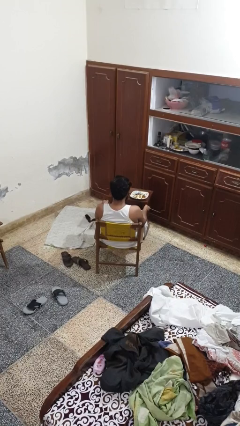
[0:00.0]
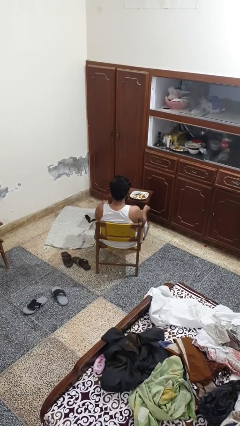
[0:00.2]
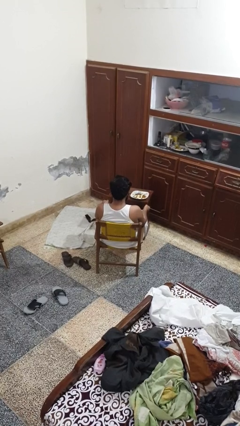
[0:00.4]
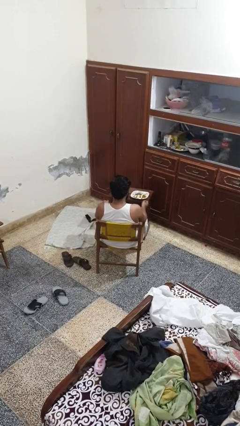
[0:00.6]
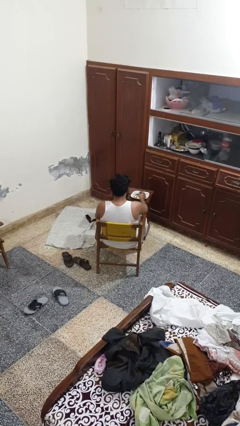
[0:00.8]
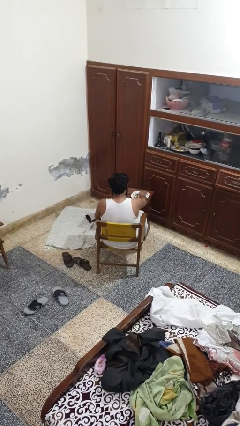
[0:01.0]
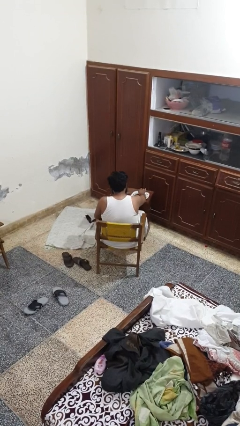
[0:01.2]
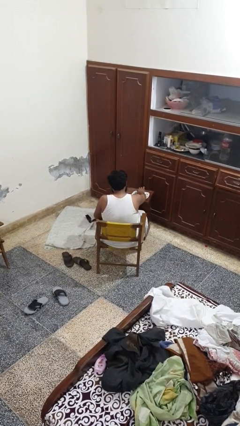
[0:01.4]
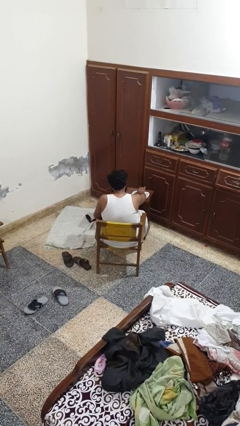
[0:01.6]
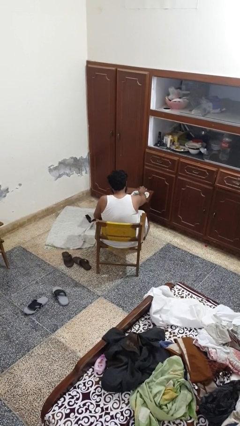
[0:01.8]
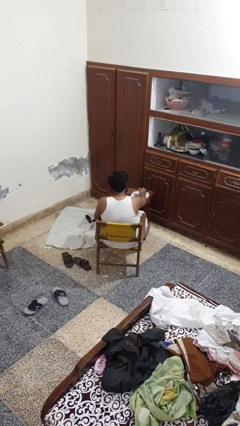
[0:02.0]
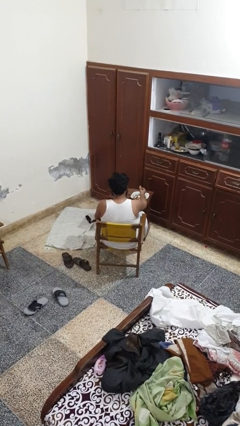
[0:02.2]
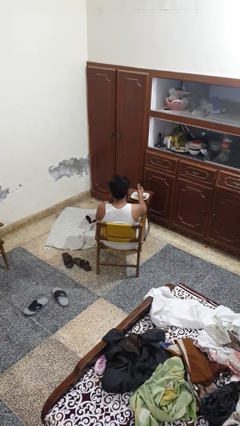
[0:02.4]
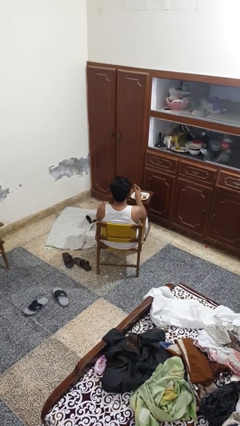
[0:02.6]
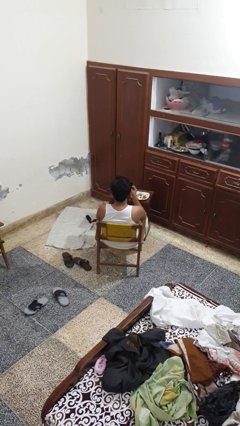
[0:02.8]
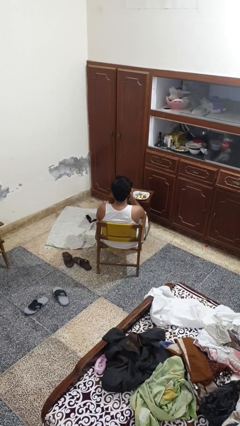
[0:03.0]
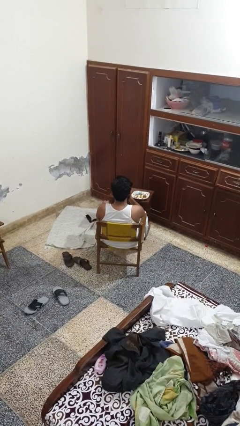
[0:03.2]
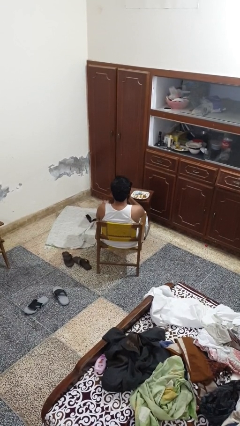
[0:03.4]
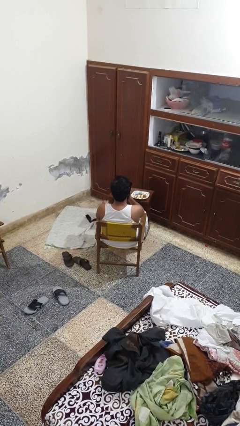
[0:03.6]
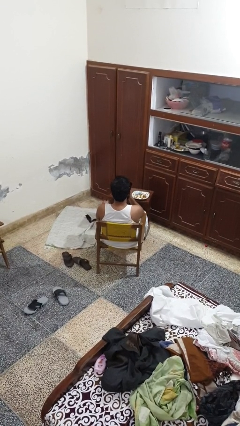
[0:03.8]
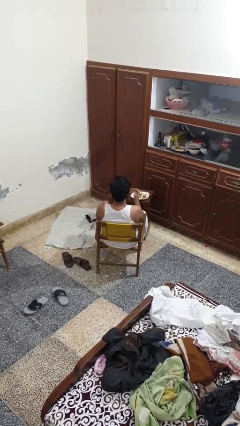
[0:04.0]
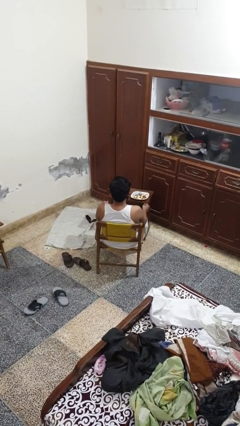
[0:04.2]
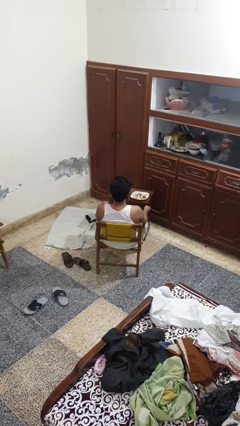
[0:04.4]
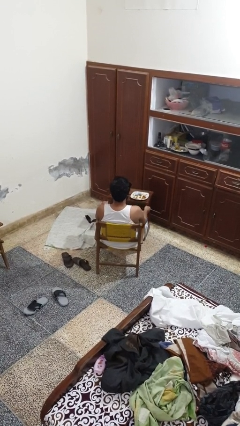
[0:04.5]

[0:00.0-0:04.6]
person eats with hands

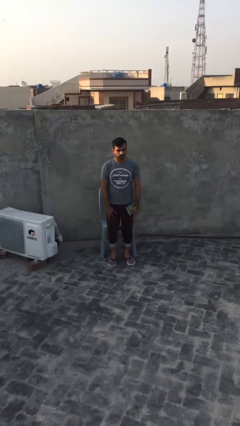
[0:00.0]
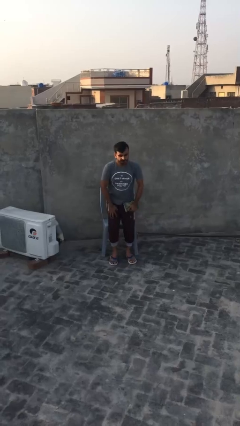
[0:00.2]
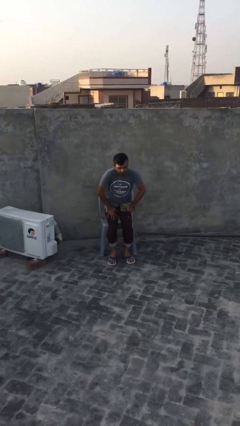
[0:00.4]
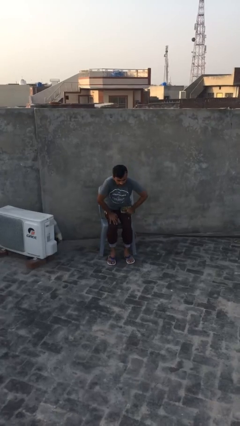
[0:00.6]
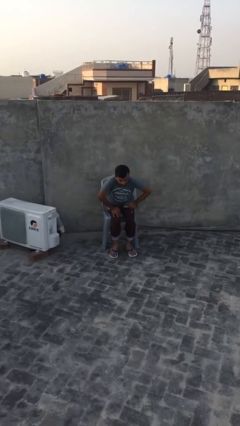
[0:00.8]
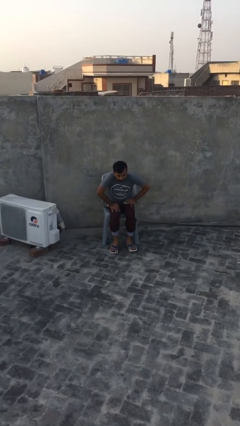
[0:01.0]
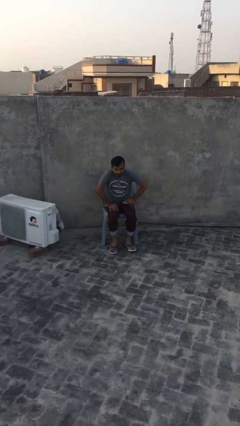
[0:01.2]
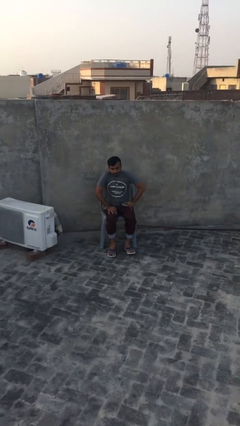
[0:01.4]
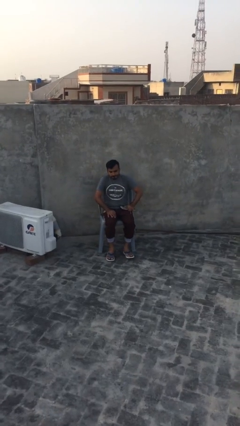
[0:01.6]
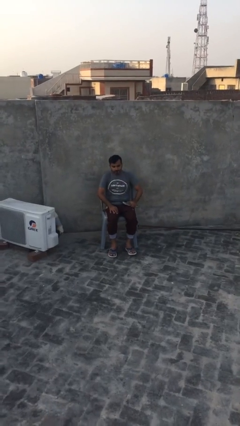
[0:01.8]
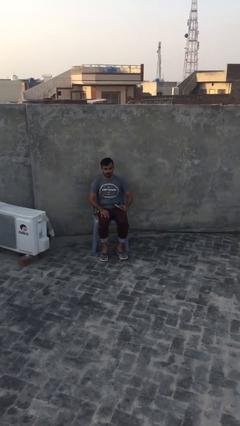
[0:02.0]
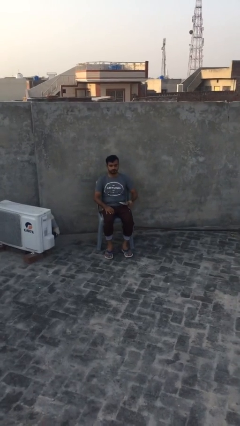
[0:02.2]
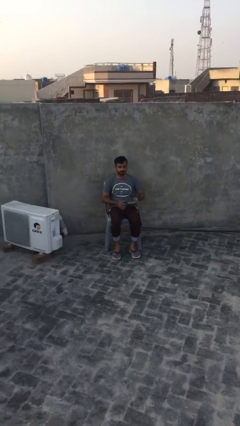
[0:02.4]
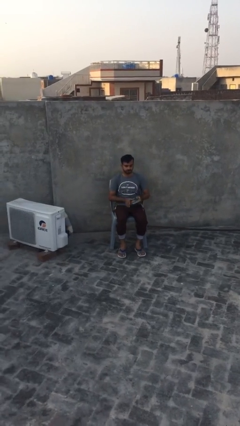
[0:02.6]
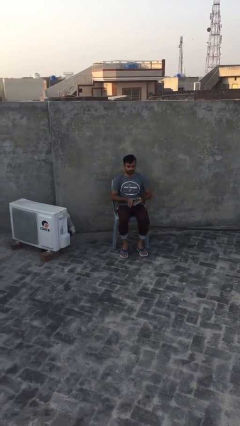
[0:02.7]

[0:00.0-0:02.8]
person sits down

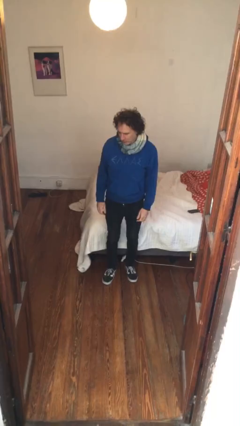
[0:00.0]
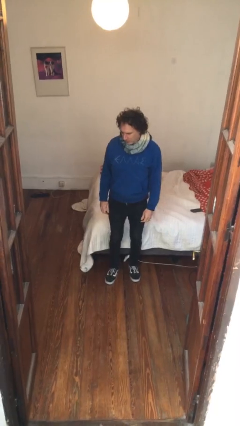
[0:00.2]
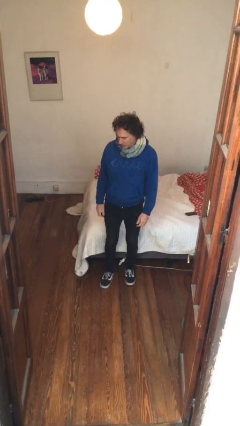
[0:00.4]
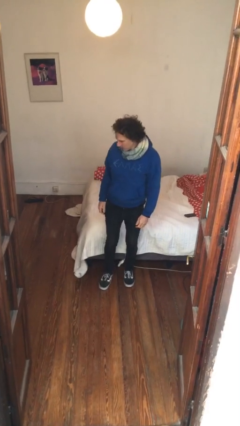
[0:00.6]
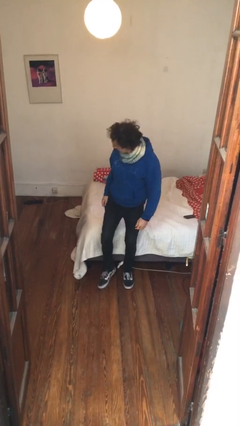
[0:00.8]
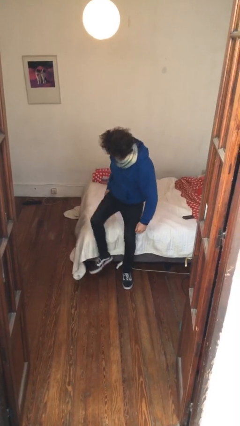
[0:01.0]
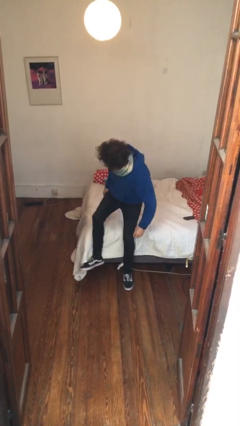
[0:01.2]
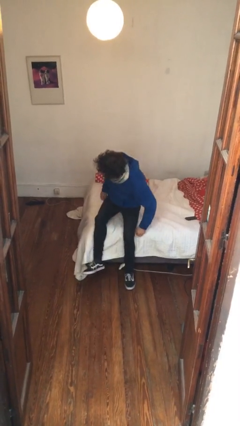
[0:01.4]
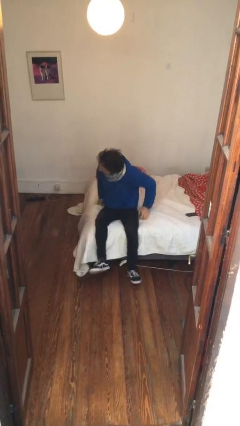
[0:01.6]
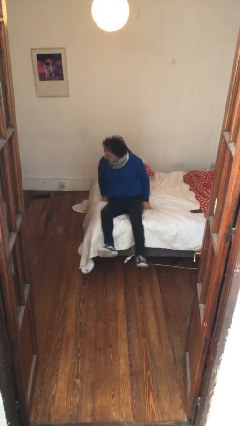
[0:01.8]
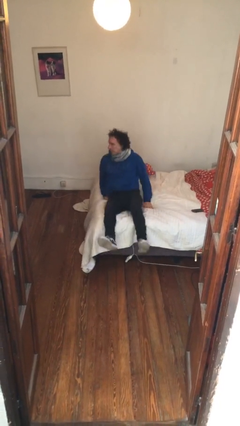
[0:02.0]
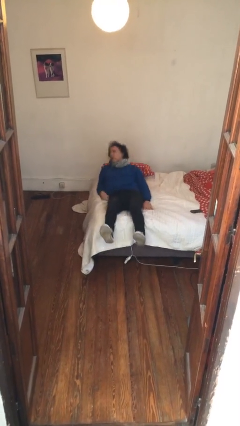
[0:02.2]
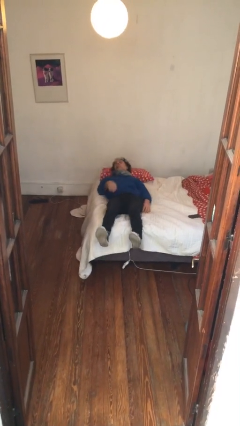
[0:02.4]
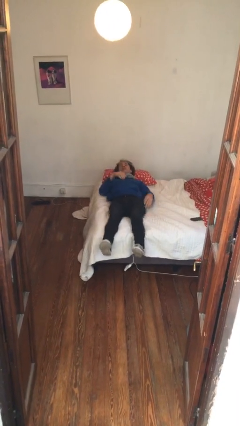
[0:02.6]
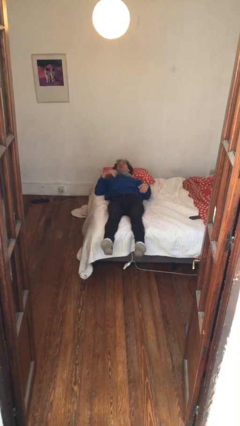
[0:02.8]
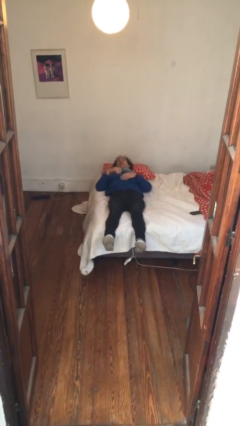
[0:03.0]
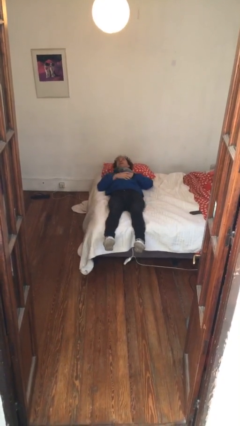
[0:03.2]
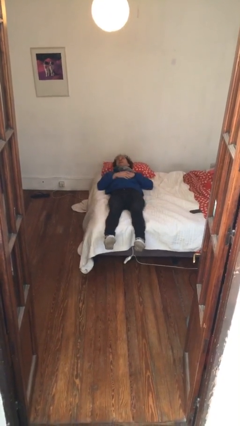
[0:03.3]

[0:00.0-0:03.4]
person lies down on bed

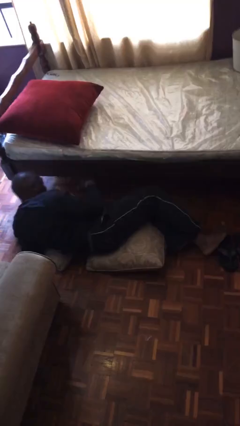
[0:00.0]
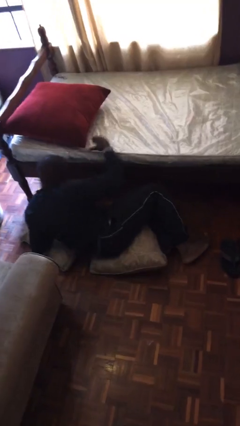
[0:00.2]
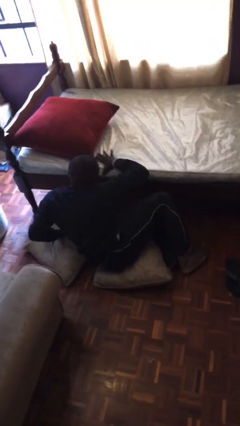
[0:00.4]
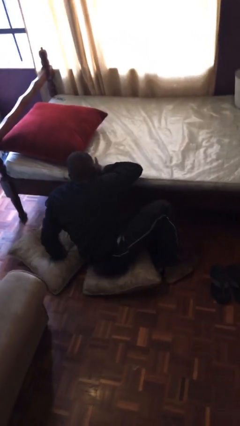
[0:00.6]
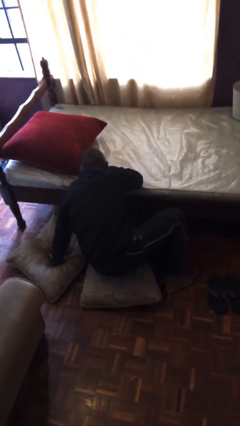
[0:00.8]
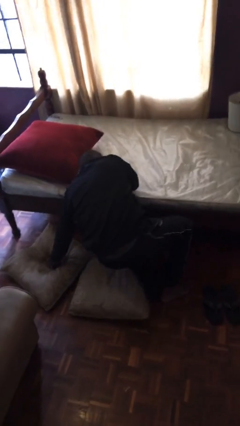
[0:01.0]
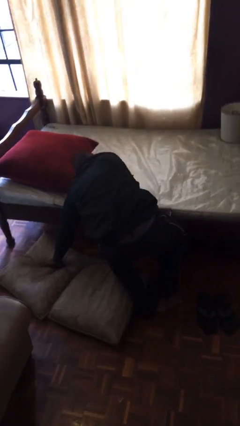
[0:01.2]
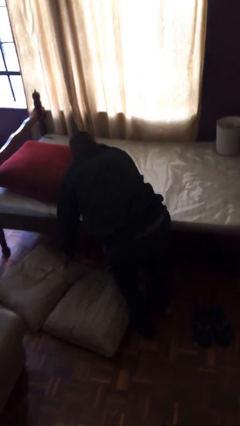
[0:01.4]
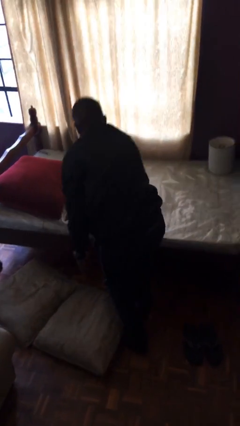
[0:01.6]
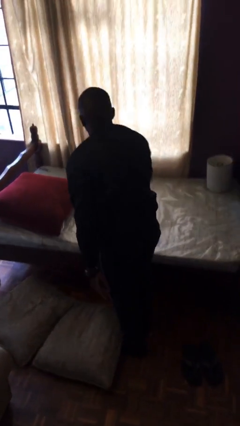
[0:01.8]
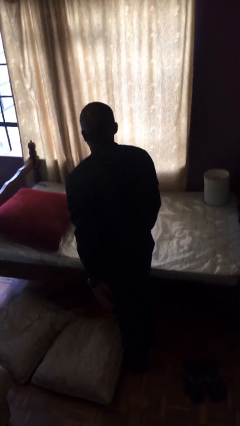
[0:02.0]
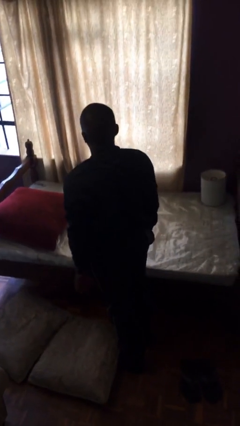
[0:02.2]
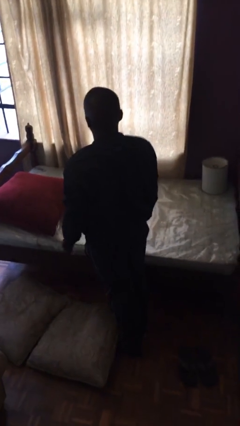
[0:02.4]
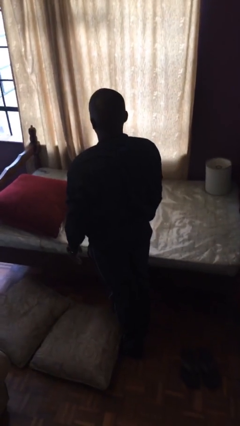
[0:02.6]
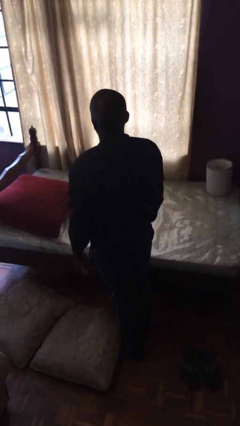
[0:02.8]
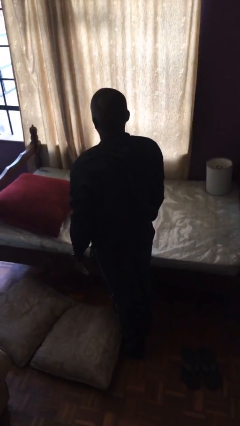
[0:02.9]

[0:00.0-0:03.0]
person stands up from floor

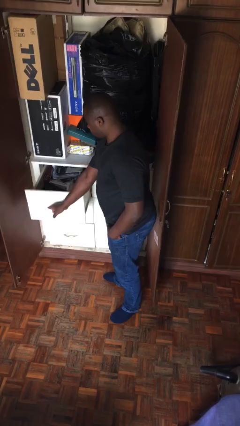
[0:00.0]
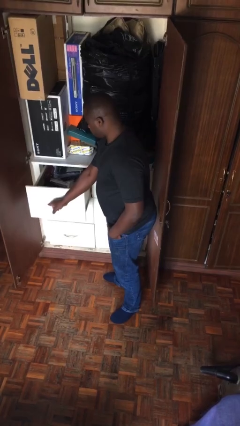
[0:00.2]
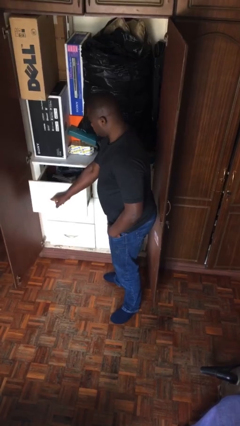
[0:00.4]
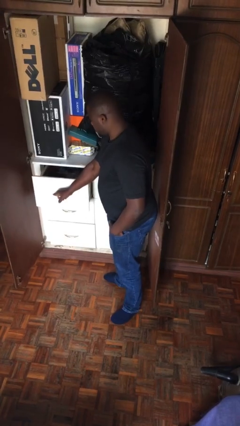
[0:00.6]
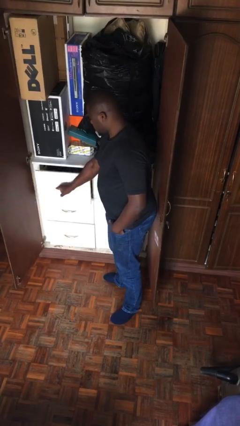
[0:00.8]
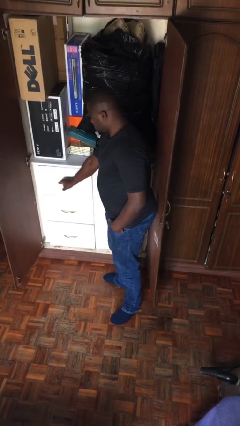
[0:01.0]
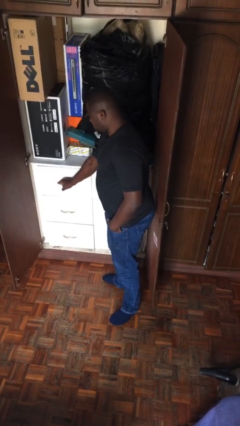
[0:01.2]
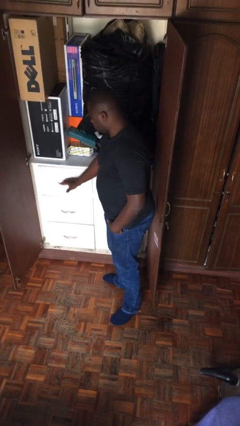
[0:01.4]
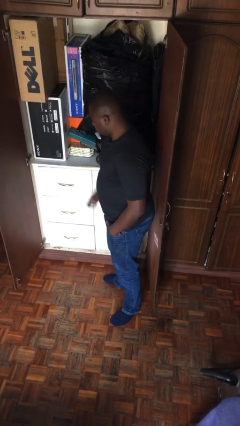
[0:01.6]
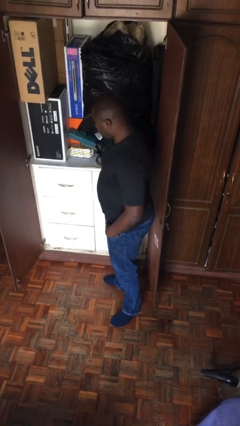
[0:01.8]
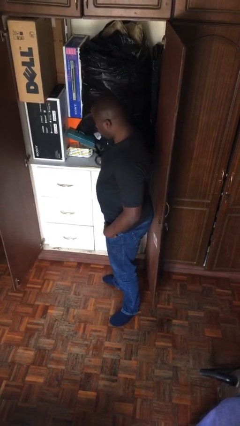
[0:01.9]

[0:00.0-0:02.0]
person closes dresser drawer

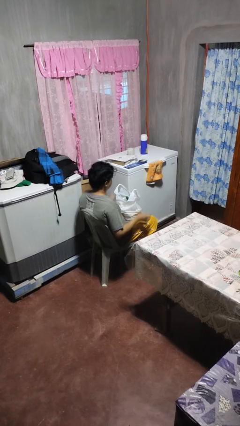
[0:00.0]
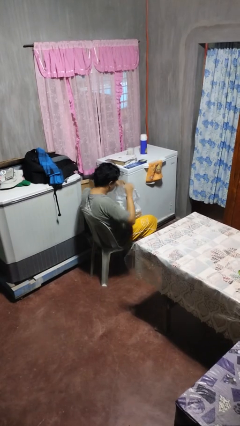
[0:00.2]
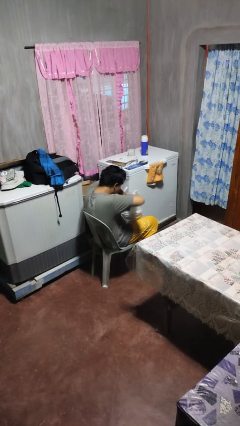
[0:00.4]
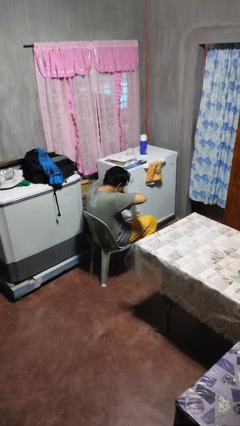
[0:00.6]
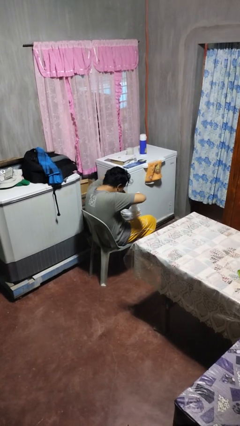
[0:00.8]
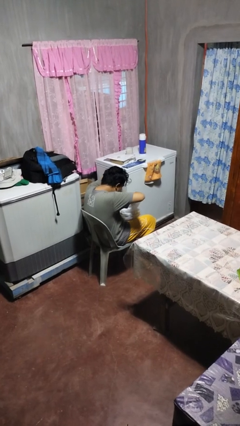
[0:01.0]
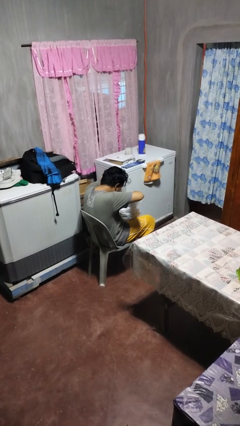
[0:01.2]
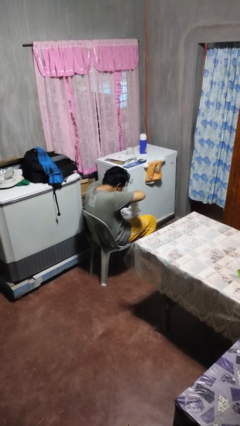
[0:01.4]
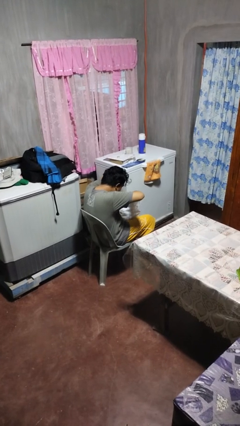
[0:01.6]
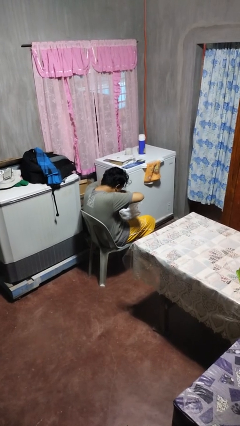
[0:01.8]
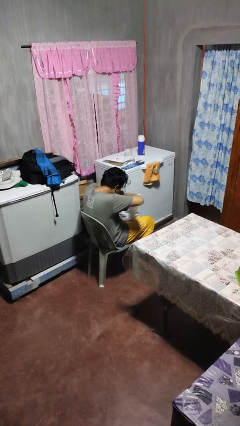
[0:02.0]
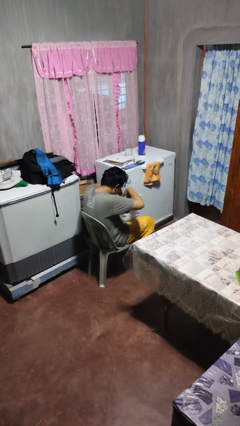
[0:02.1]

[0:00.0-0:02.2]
person searches in bag
